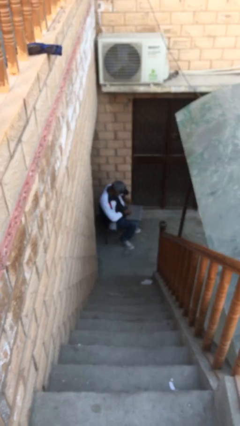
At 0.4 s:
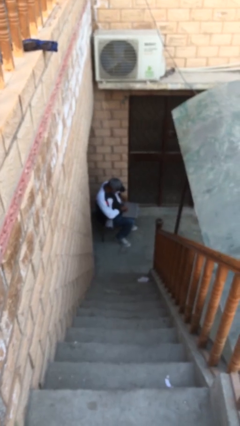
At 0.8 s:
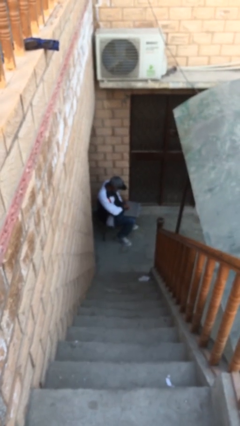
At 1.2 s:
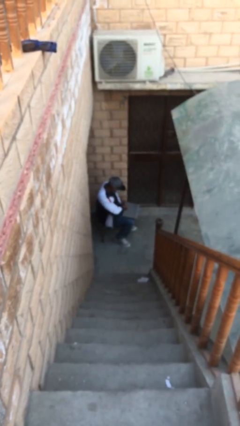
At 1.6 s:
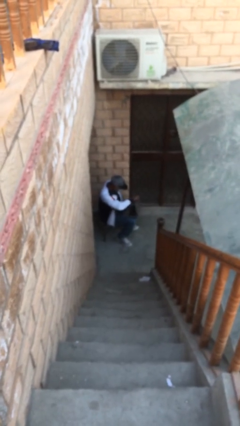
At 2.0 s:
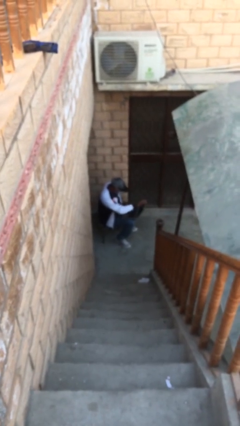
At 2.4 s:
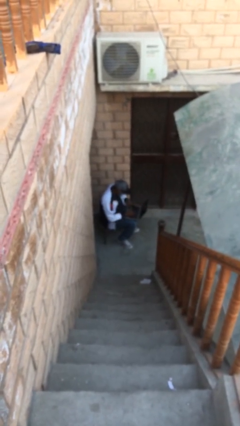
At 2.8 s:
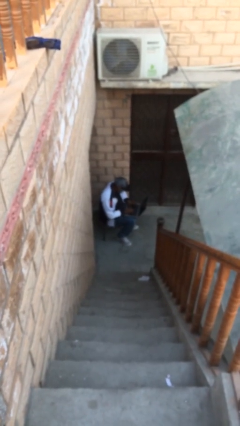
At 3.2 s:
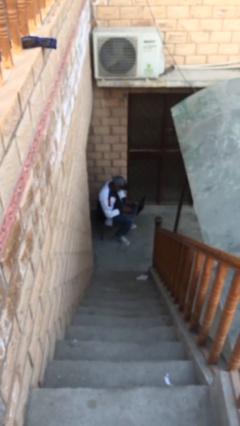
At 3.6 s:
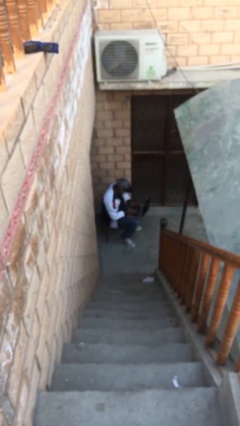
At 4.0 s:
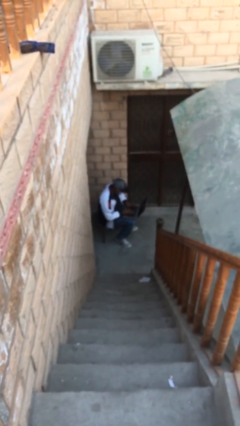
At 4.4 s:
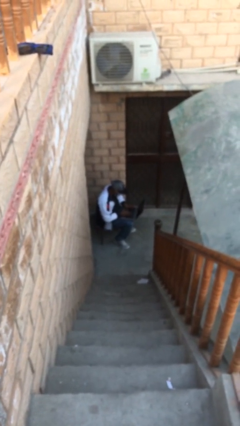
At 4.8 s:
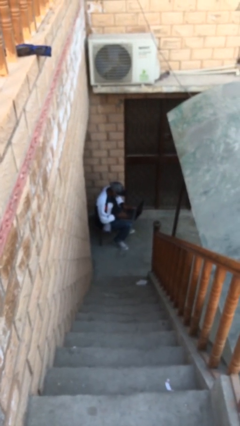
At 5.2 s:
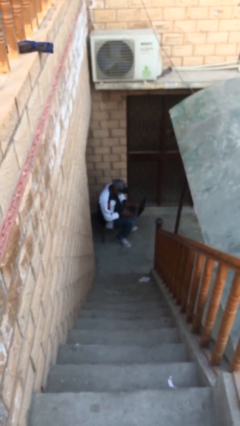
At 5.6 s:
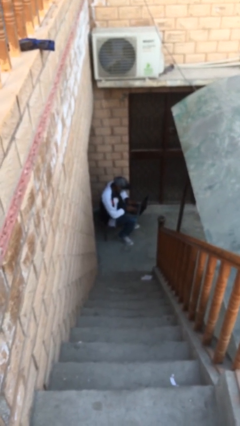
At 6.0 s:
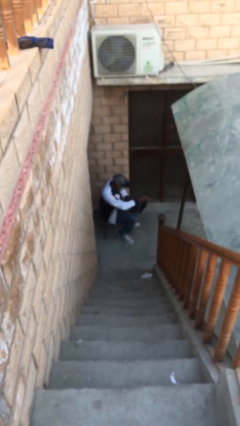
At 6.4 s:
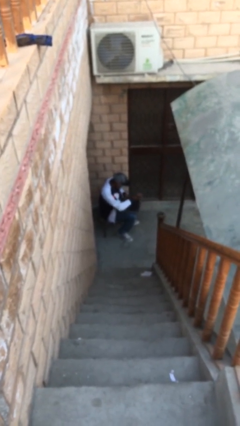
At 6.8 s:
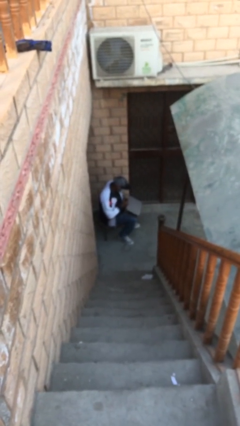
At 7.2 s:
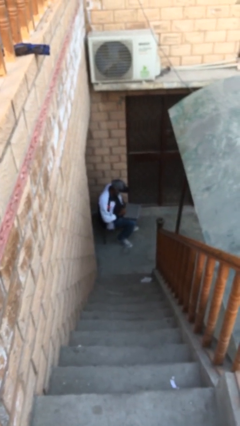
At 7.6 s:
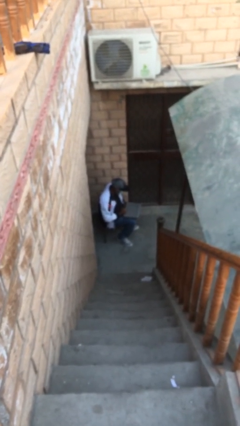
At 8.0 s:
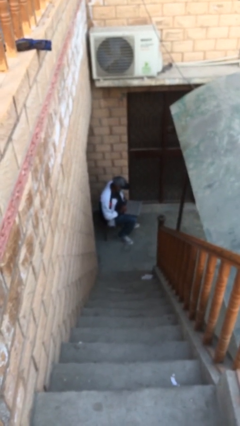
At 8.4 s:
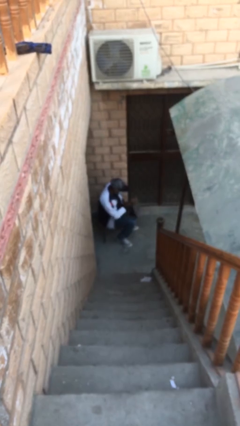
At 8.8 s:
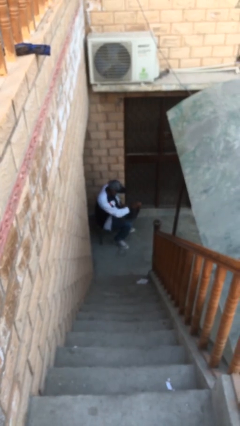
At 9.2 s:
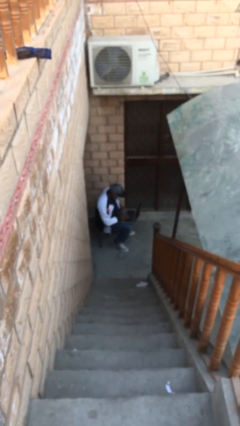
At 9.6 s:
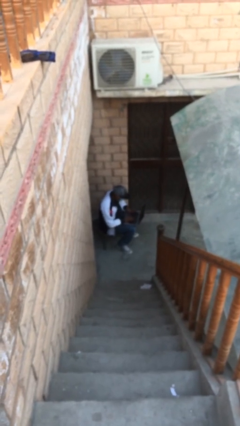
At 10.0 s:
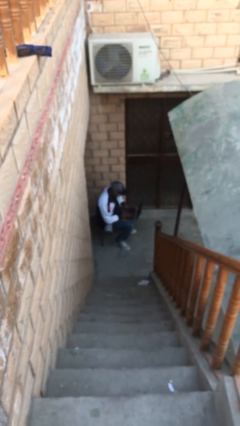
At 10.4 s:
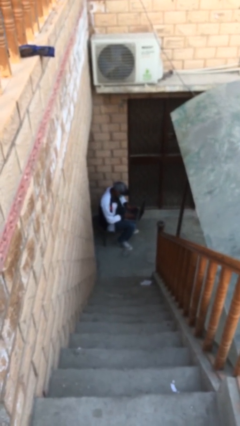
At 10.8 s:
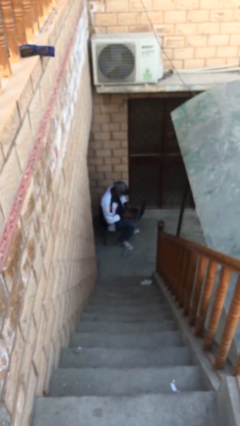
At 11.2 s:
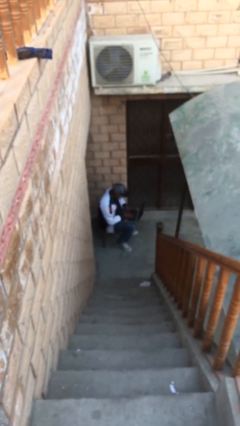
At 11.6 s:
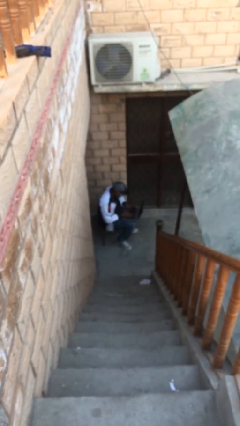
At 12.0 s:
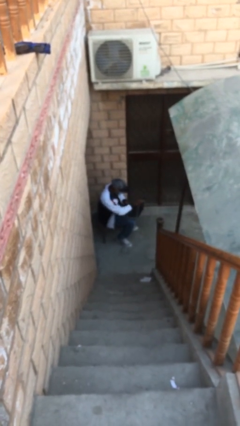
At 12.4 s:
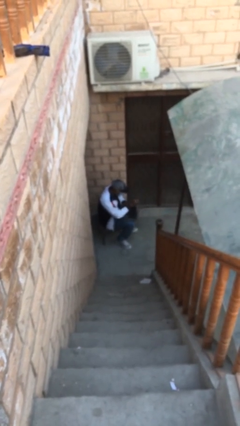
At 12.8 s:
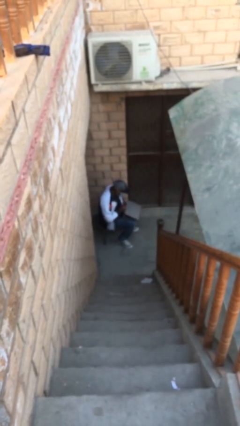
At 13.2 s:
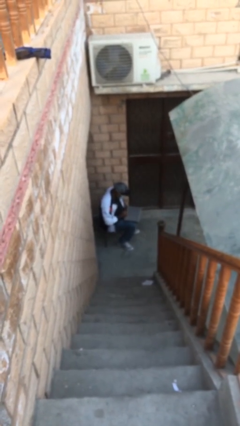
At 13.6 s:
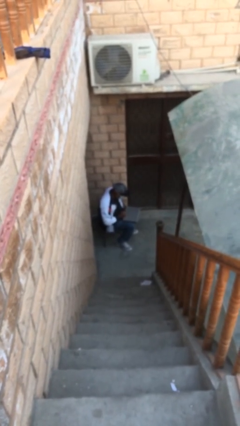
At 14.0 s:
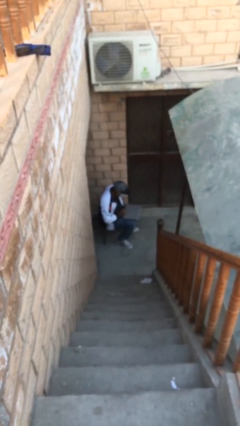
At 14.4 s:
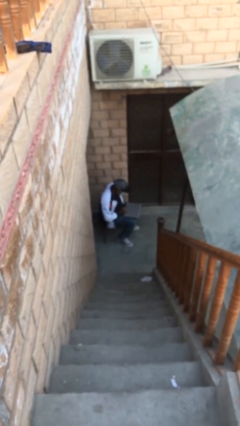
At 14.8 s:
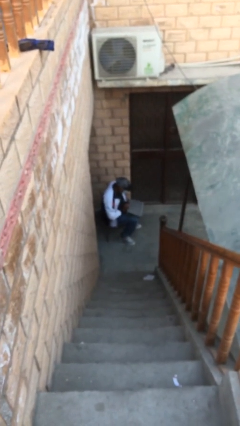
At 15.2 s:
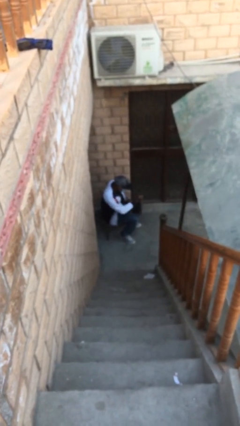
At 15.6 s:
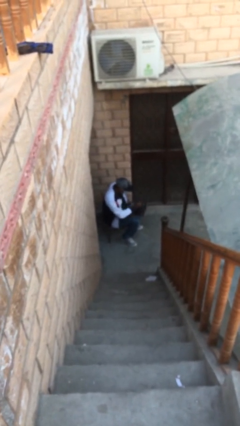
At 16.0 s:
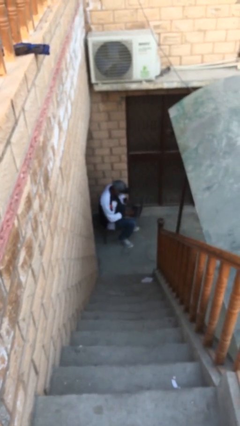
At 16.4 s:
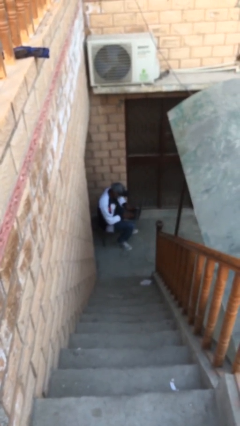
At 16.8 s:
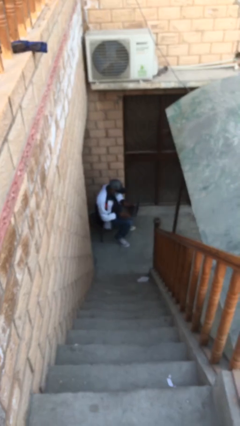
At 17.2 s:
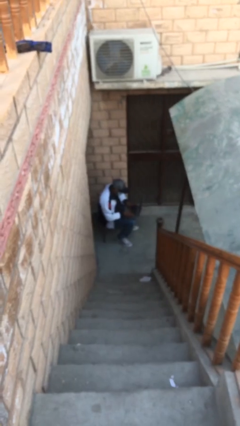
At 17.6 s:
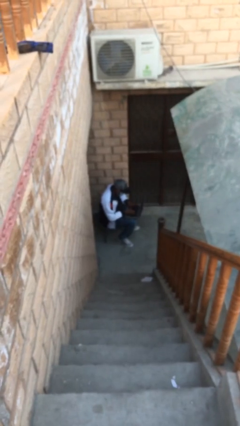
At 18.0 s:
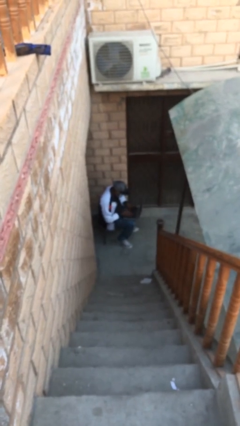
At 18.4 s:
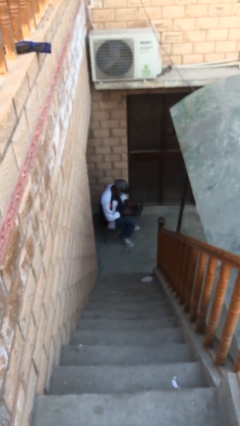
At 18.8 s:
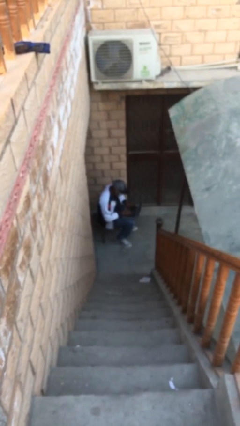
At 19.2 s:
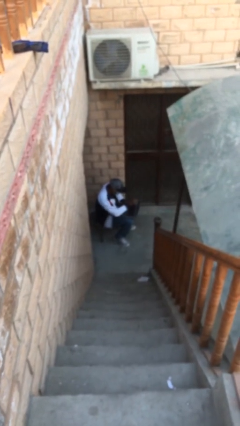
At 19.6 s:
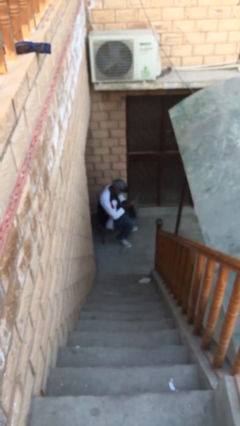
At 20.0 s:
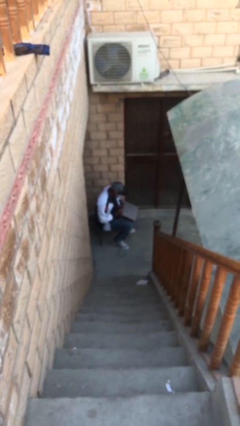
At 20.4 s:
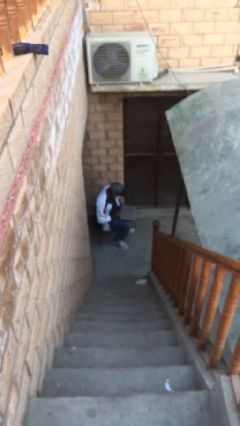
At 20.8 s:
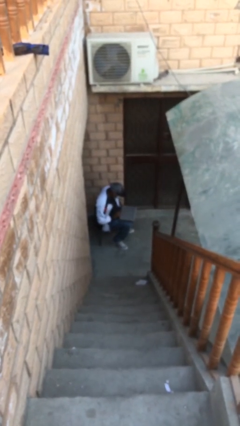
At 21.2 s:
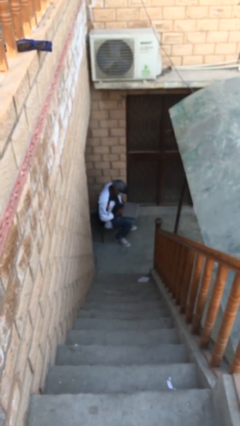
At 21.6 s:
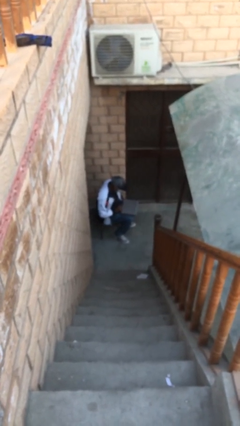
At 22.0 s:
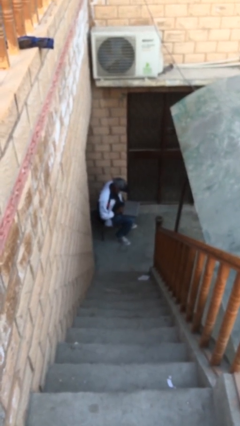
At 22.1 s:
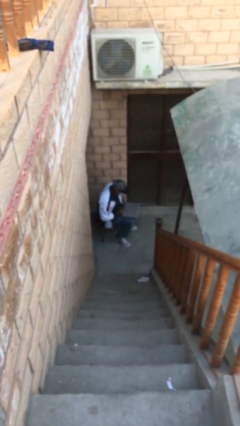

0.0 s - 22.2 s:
person interacts with laptop

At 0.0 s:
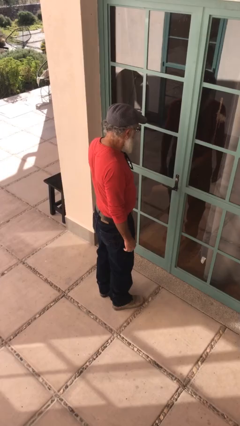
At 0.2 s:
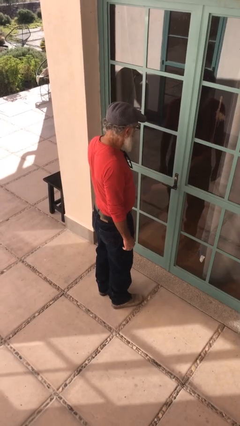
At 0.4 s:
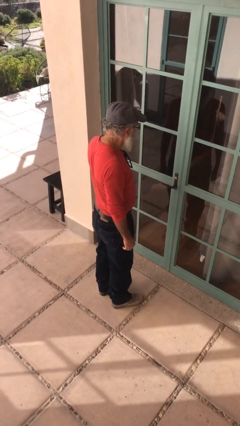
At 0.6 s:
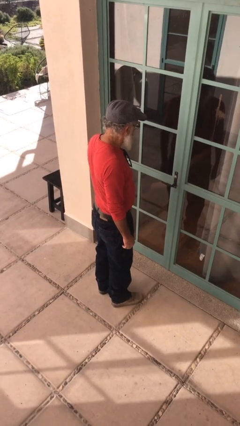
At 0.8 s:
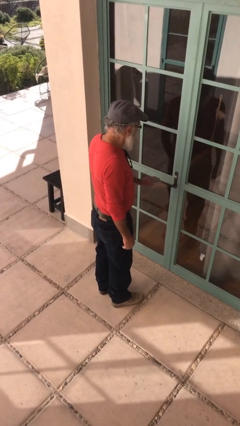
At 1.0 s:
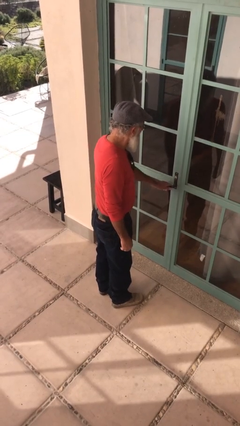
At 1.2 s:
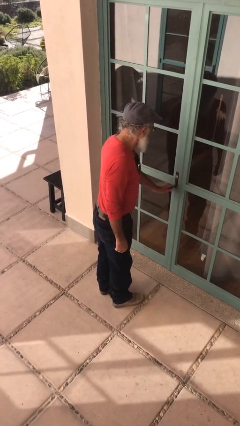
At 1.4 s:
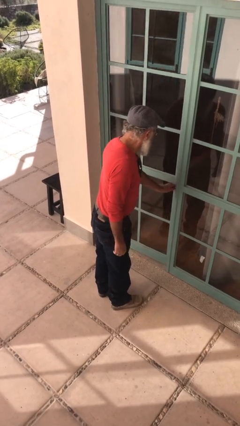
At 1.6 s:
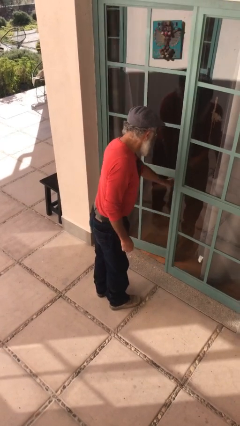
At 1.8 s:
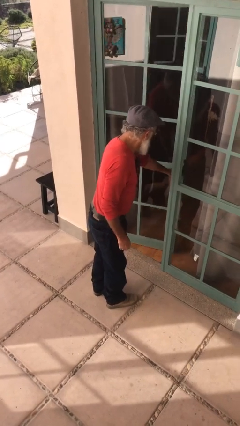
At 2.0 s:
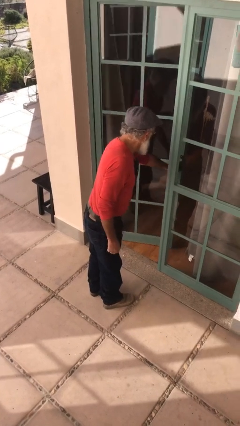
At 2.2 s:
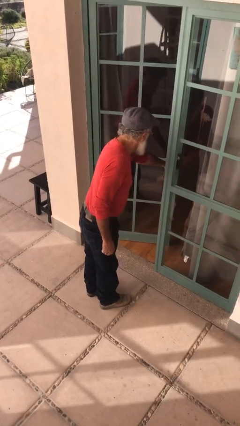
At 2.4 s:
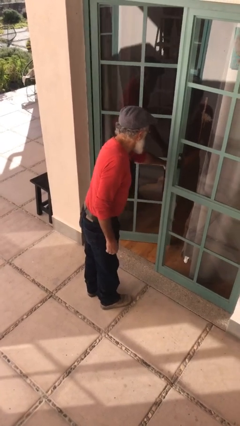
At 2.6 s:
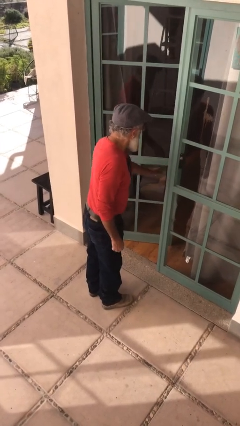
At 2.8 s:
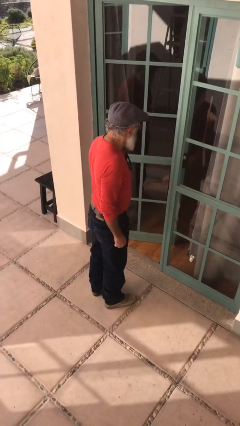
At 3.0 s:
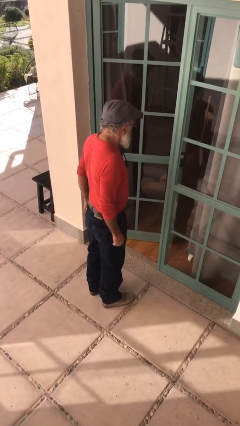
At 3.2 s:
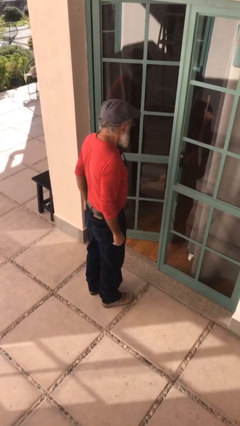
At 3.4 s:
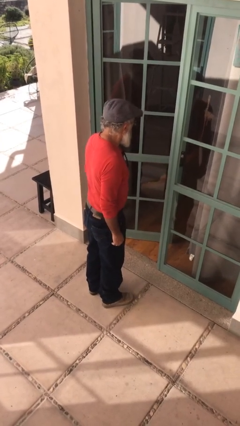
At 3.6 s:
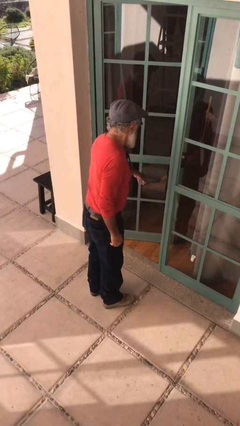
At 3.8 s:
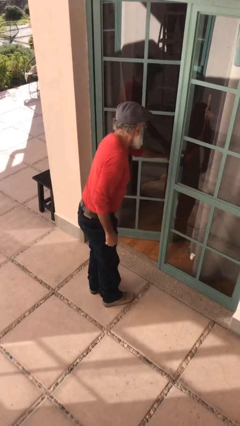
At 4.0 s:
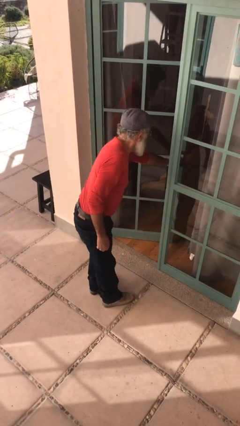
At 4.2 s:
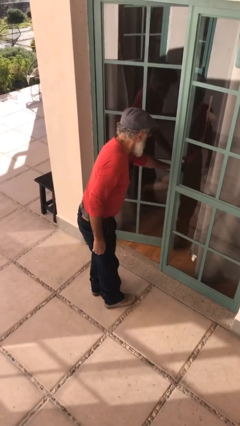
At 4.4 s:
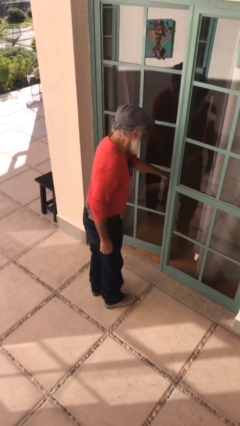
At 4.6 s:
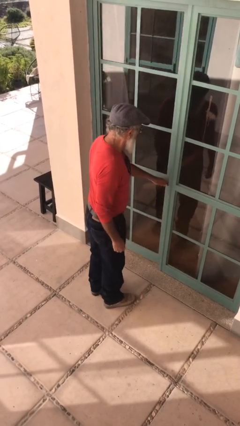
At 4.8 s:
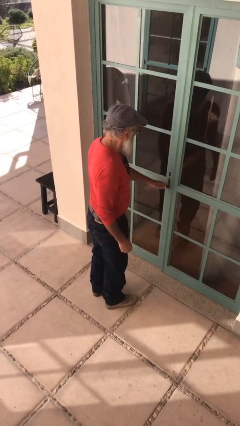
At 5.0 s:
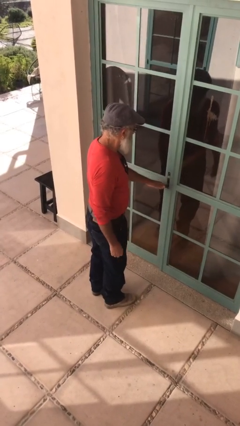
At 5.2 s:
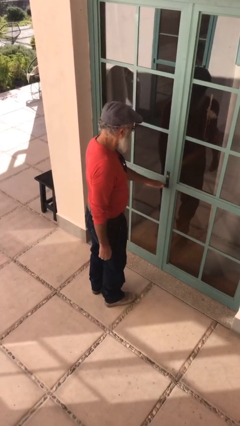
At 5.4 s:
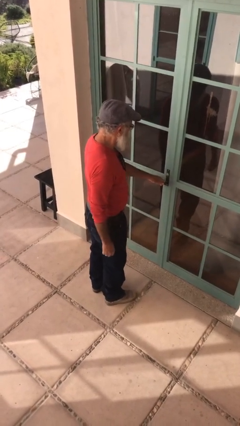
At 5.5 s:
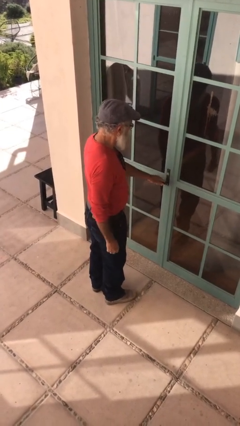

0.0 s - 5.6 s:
person opens facility door

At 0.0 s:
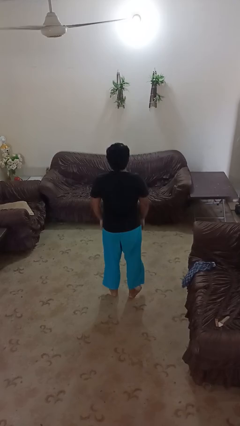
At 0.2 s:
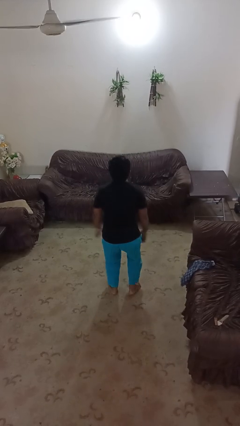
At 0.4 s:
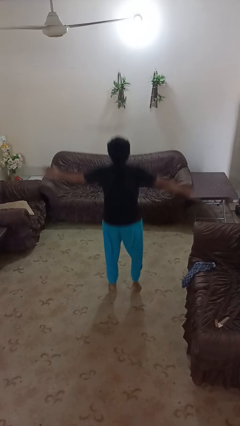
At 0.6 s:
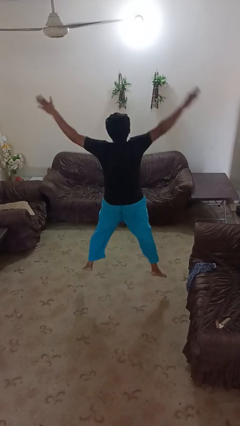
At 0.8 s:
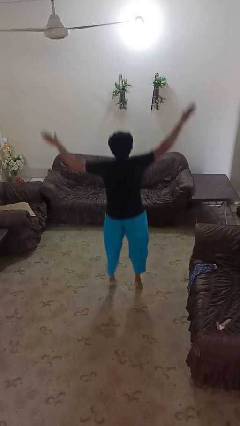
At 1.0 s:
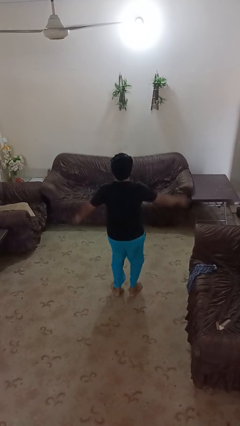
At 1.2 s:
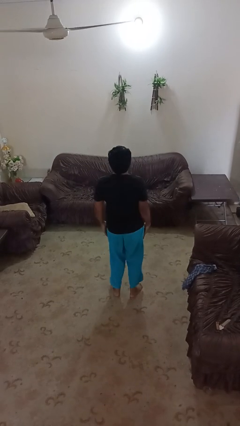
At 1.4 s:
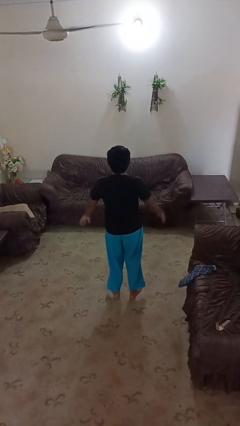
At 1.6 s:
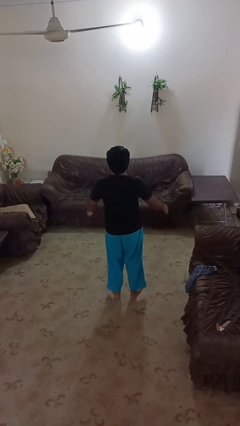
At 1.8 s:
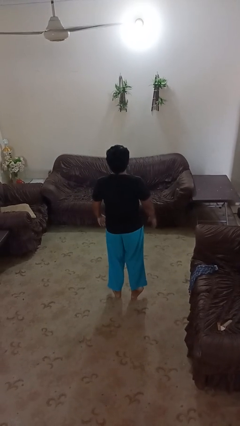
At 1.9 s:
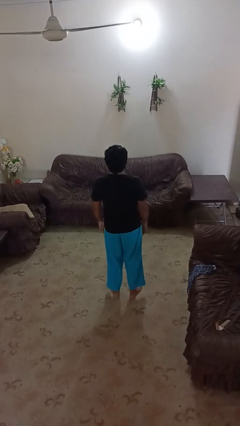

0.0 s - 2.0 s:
person exercises with jumping jacks
